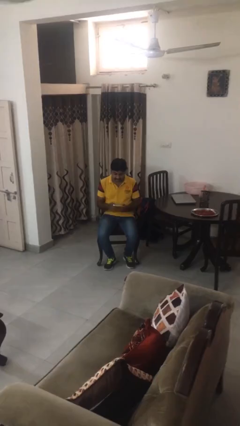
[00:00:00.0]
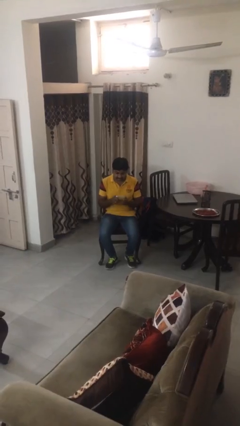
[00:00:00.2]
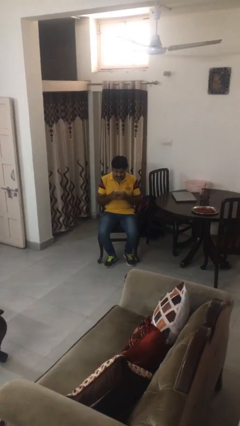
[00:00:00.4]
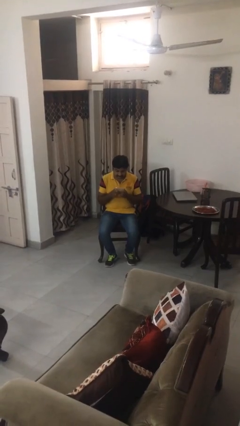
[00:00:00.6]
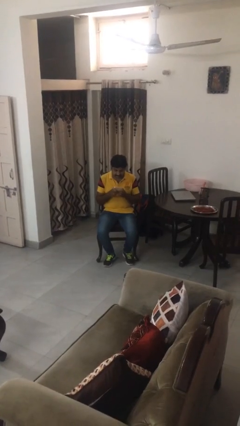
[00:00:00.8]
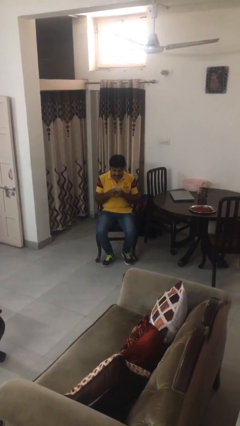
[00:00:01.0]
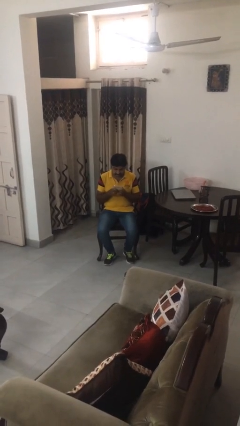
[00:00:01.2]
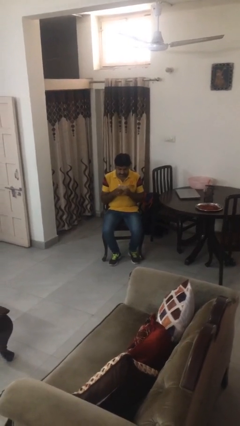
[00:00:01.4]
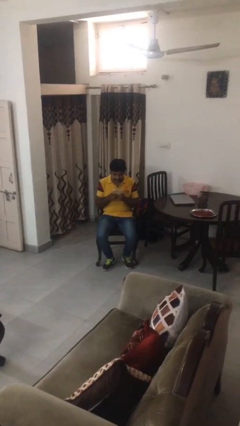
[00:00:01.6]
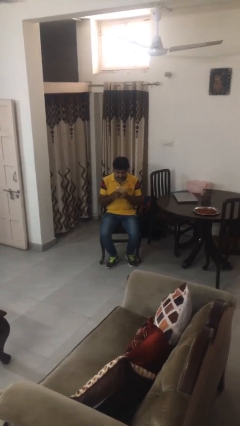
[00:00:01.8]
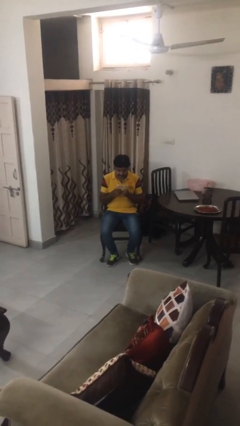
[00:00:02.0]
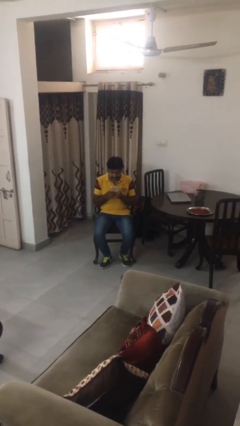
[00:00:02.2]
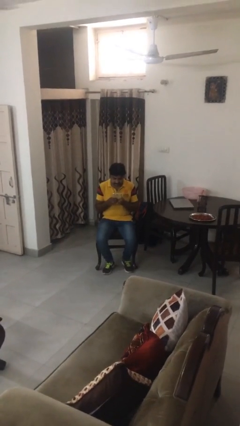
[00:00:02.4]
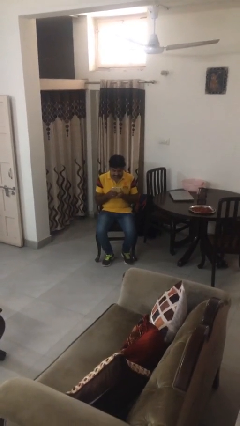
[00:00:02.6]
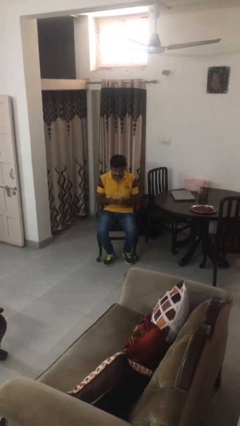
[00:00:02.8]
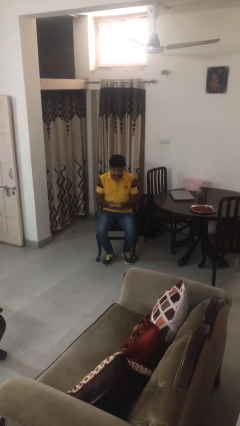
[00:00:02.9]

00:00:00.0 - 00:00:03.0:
person interacts with tablet

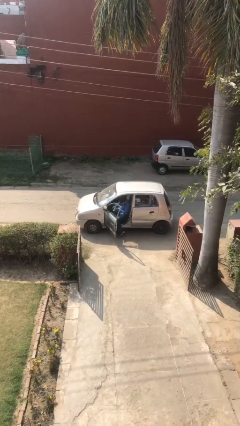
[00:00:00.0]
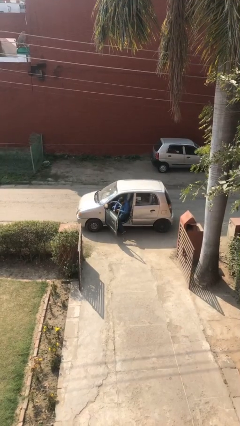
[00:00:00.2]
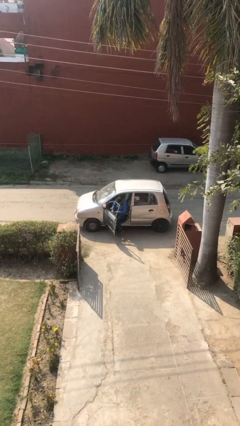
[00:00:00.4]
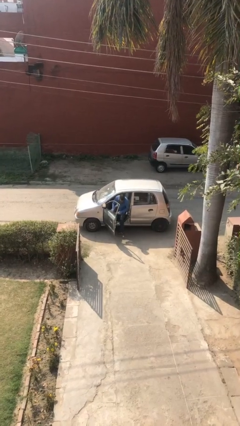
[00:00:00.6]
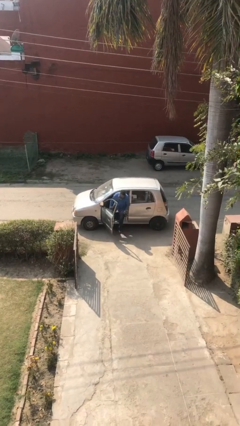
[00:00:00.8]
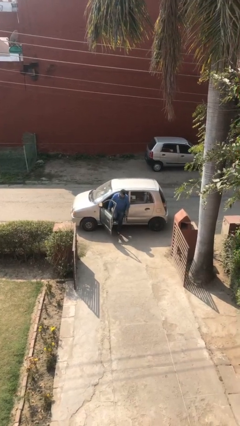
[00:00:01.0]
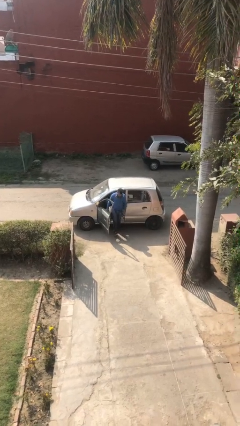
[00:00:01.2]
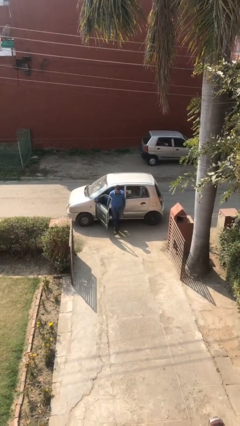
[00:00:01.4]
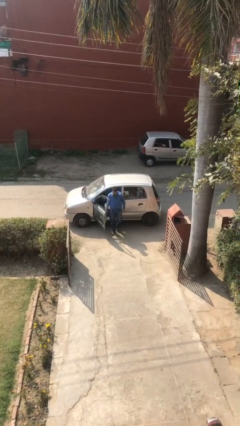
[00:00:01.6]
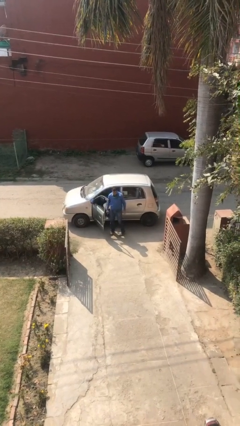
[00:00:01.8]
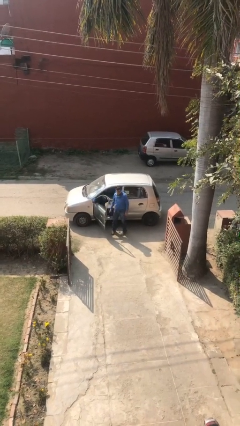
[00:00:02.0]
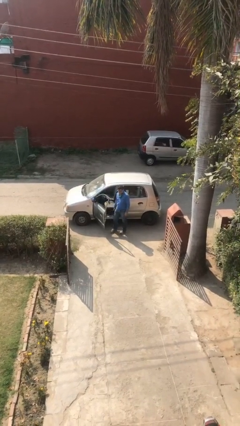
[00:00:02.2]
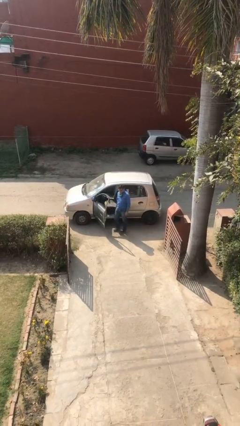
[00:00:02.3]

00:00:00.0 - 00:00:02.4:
person exits car

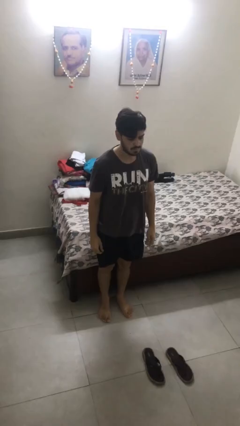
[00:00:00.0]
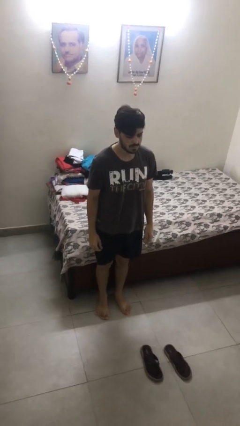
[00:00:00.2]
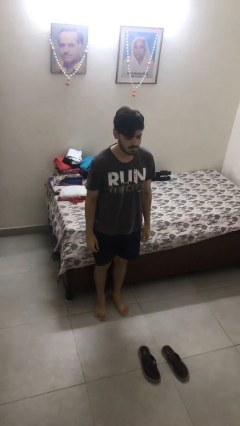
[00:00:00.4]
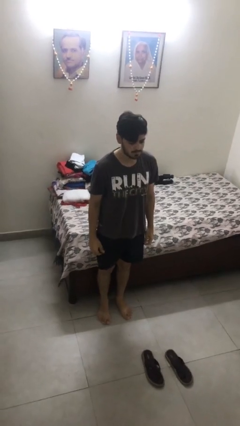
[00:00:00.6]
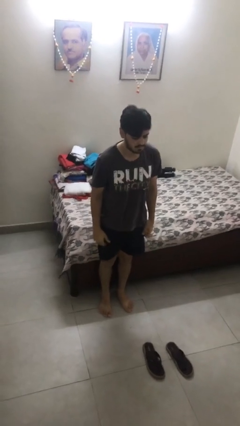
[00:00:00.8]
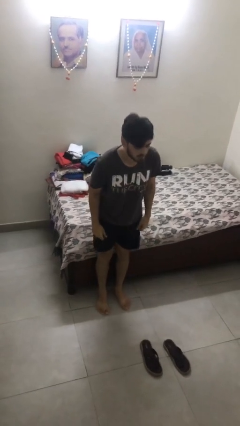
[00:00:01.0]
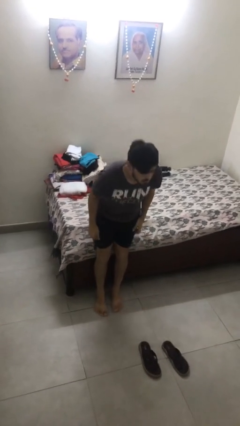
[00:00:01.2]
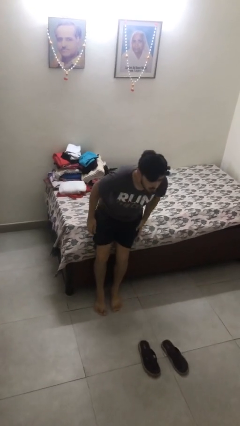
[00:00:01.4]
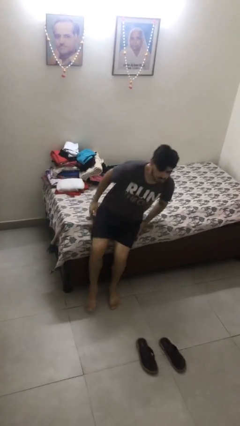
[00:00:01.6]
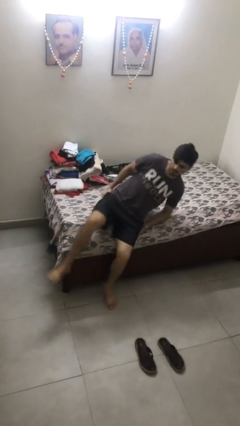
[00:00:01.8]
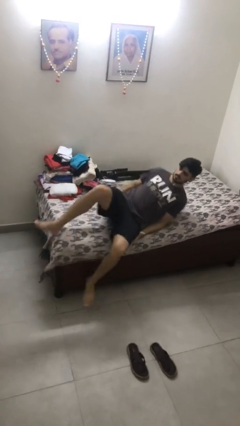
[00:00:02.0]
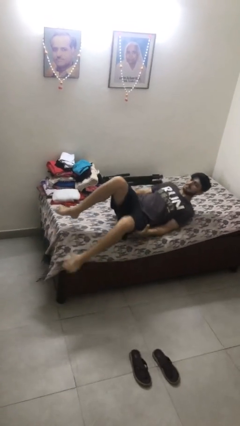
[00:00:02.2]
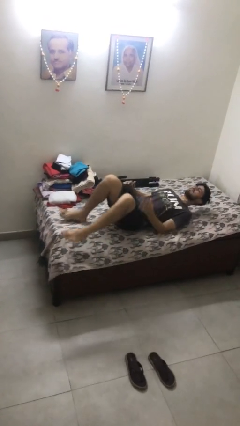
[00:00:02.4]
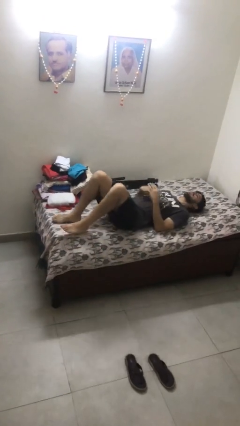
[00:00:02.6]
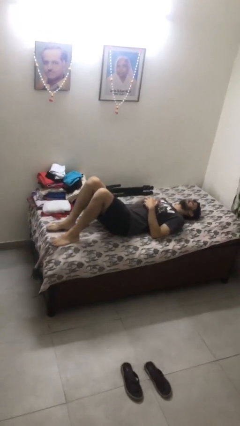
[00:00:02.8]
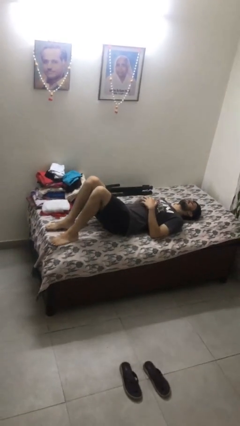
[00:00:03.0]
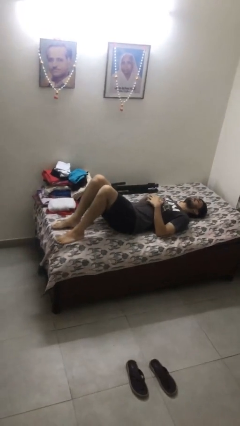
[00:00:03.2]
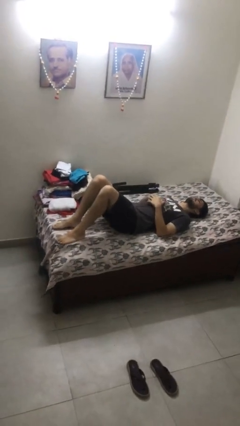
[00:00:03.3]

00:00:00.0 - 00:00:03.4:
person lies down on bed

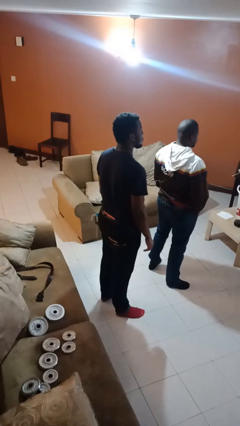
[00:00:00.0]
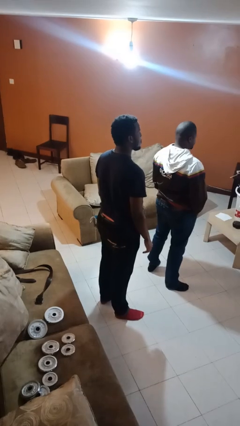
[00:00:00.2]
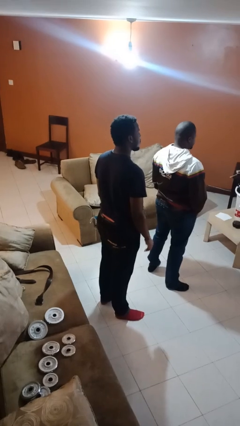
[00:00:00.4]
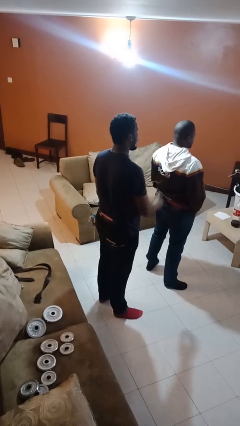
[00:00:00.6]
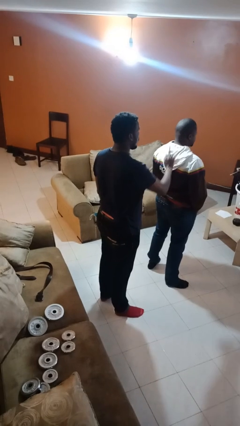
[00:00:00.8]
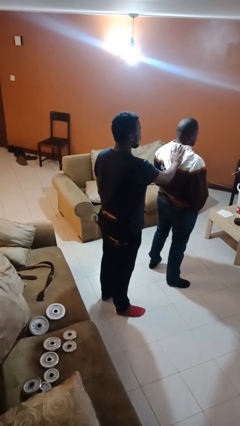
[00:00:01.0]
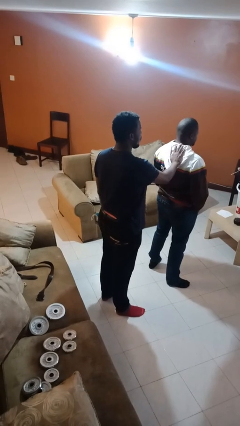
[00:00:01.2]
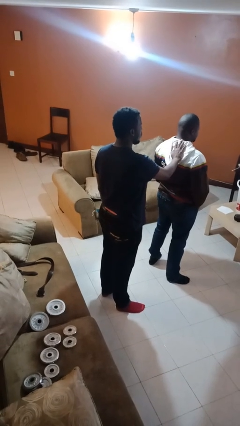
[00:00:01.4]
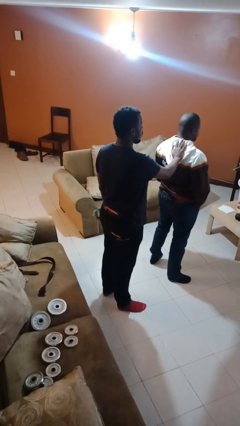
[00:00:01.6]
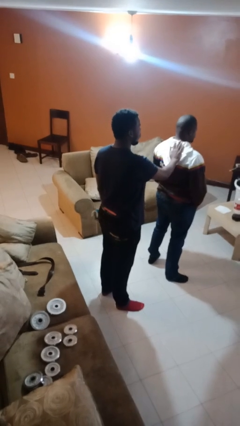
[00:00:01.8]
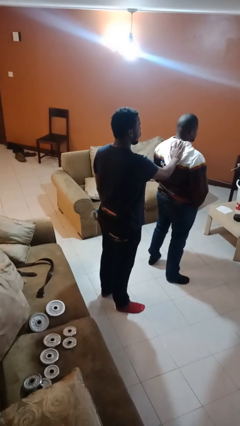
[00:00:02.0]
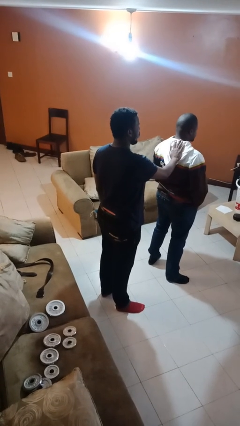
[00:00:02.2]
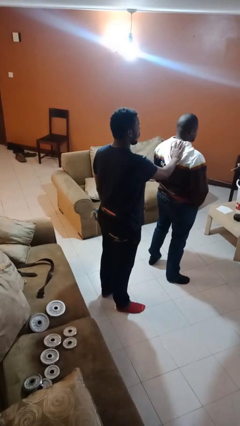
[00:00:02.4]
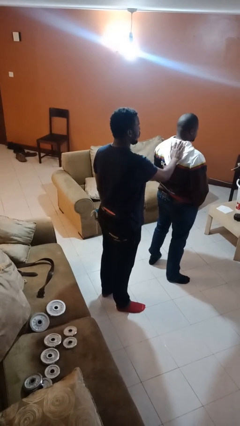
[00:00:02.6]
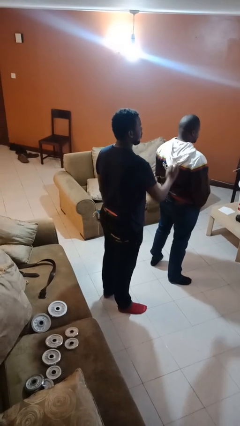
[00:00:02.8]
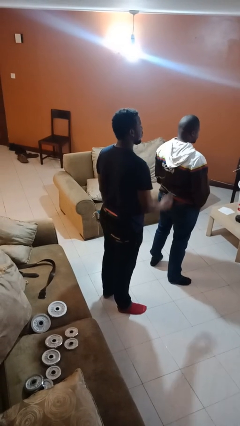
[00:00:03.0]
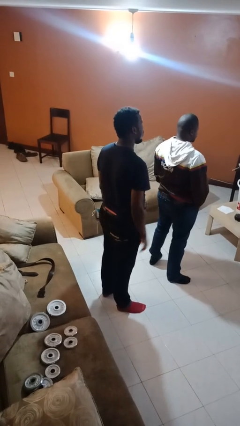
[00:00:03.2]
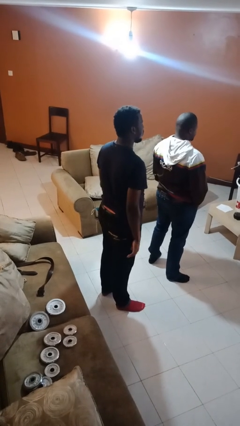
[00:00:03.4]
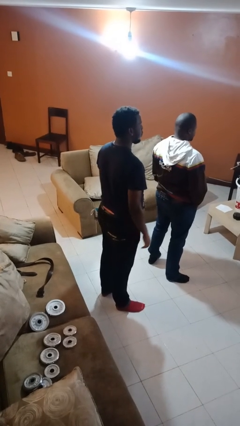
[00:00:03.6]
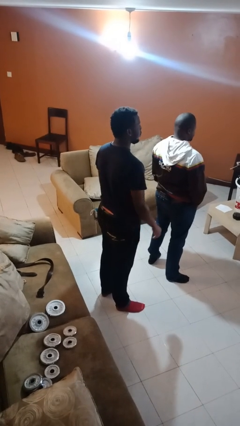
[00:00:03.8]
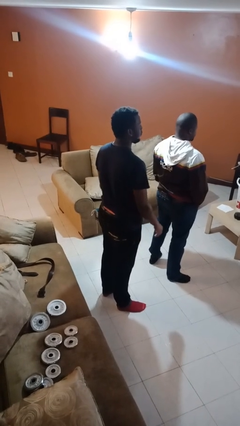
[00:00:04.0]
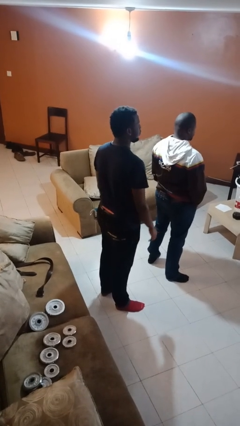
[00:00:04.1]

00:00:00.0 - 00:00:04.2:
person touches back of person

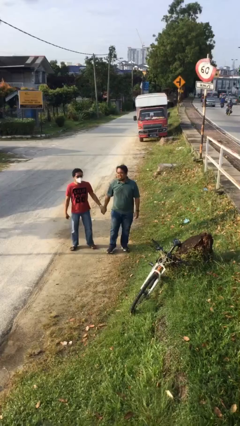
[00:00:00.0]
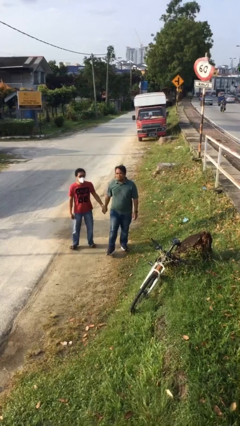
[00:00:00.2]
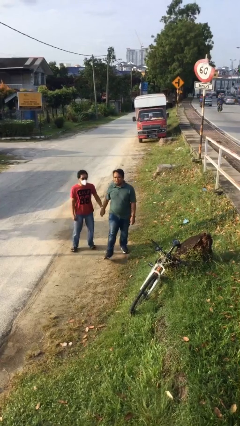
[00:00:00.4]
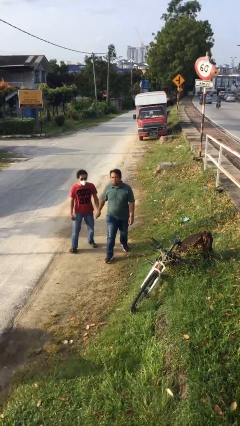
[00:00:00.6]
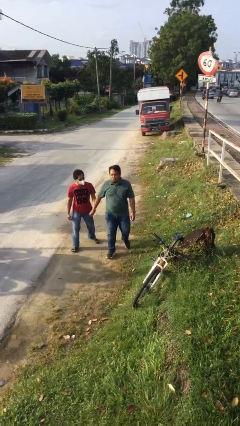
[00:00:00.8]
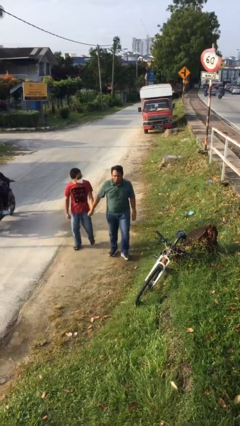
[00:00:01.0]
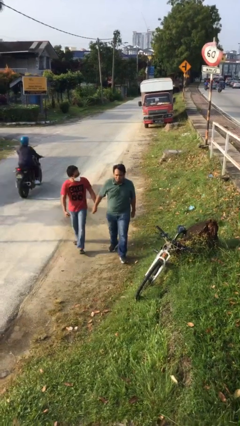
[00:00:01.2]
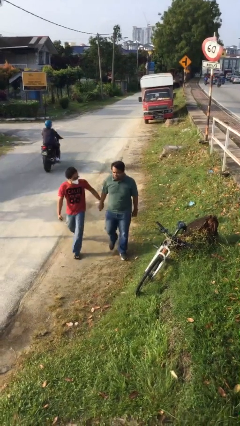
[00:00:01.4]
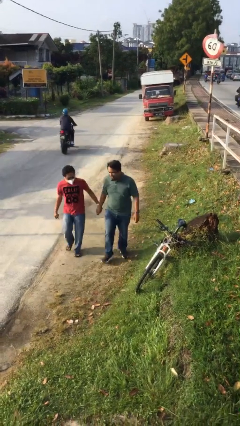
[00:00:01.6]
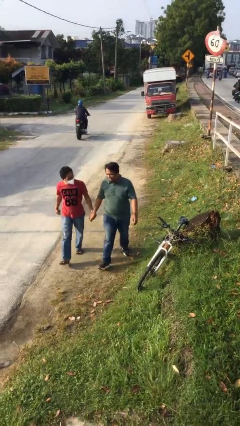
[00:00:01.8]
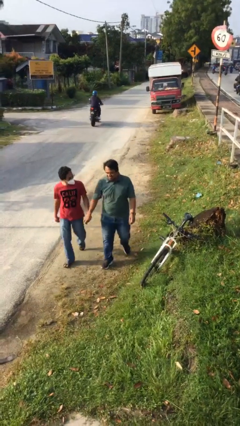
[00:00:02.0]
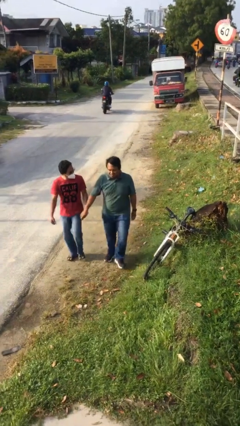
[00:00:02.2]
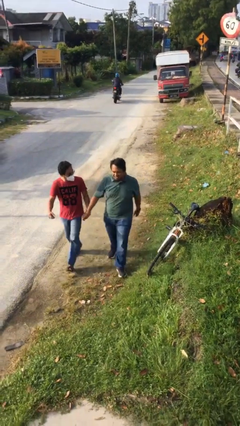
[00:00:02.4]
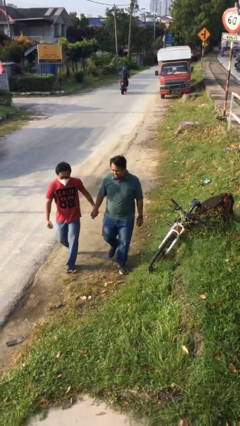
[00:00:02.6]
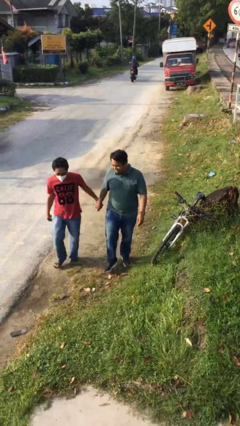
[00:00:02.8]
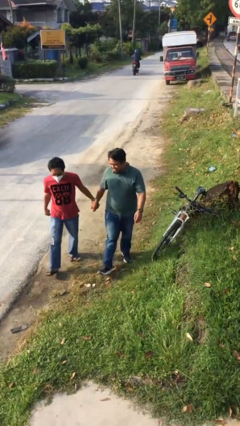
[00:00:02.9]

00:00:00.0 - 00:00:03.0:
person holds hand

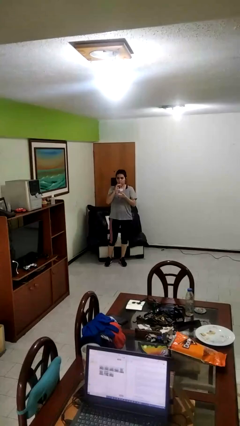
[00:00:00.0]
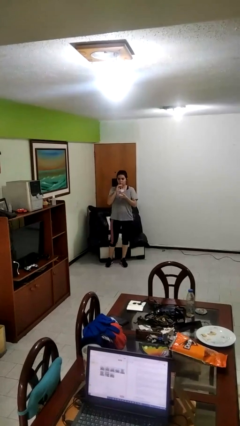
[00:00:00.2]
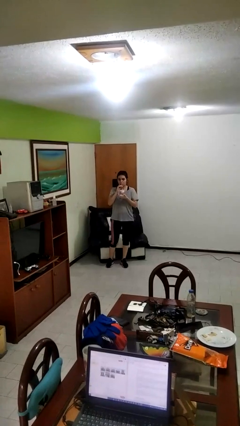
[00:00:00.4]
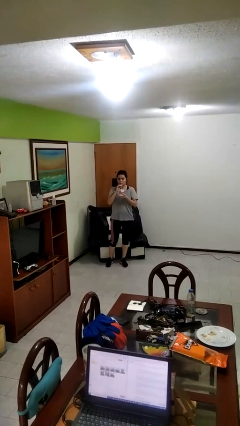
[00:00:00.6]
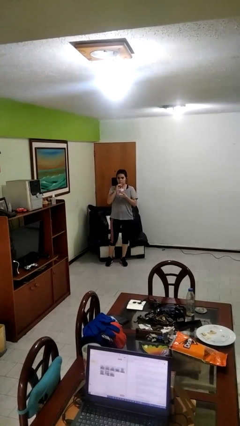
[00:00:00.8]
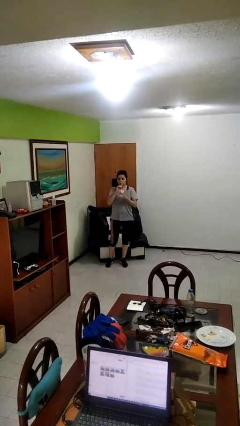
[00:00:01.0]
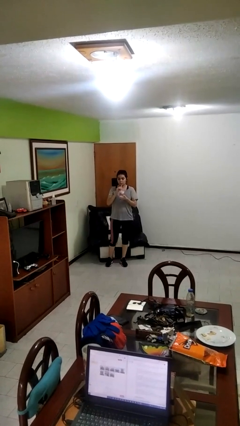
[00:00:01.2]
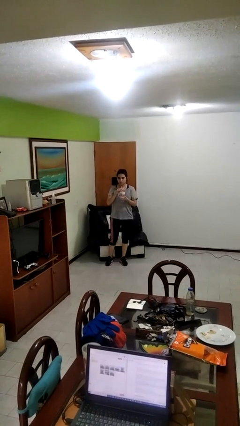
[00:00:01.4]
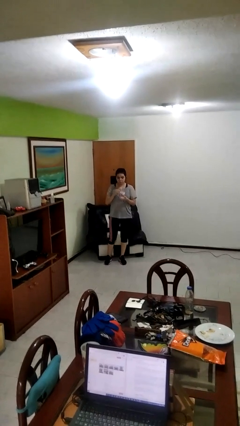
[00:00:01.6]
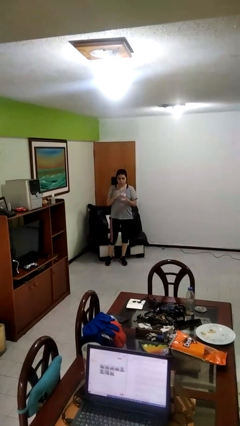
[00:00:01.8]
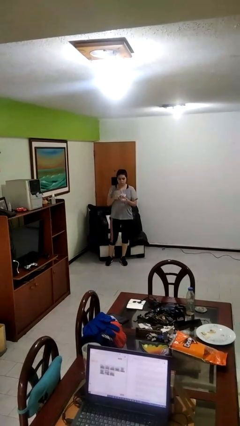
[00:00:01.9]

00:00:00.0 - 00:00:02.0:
person drinks from straw
